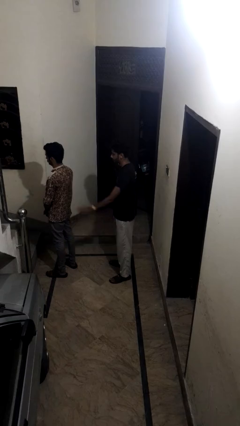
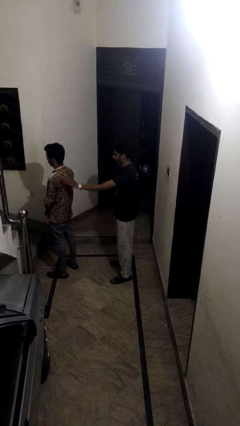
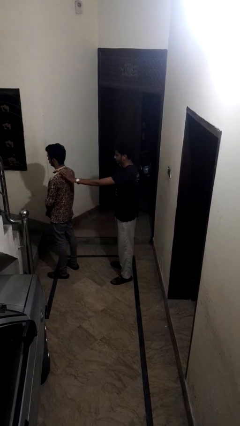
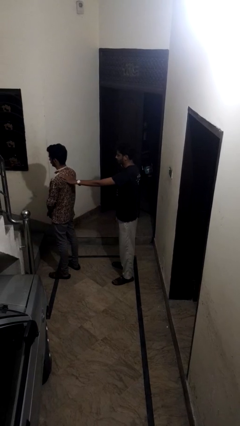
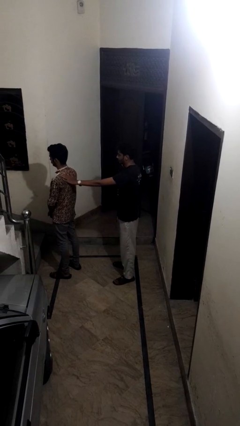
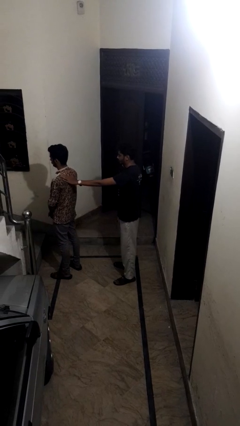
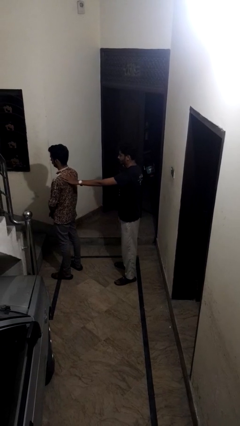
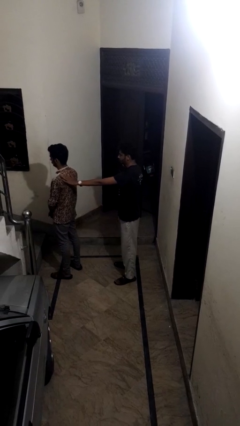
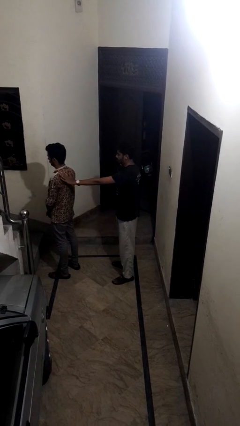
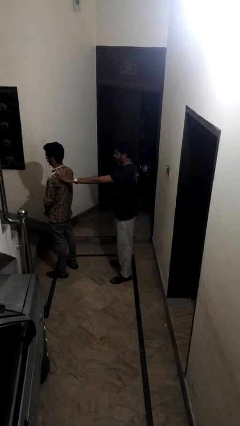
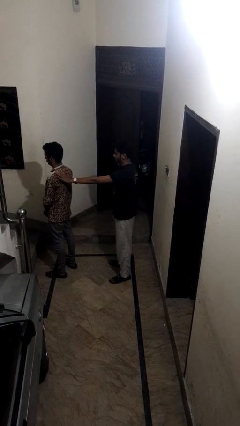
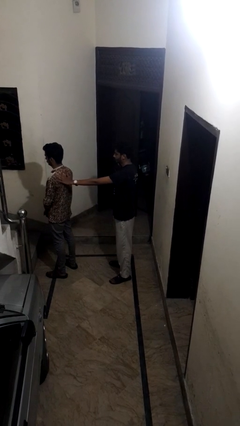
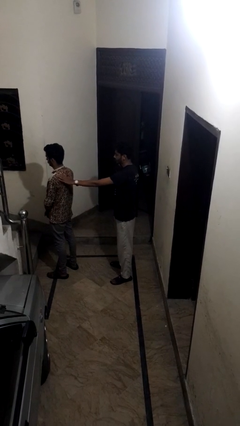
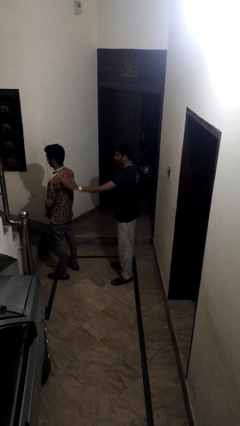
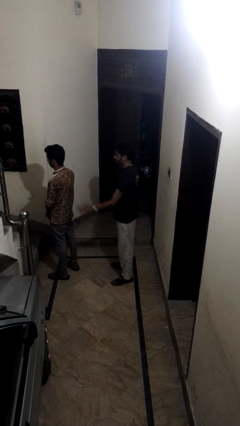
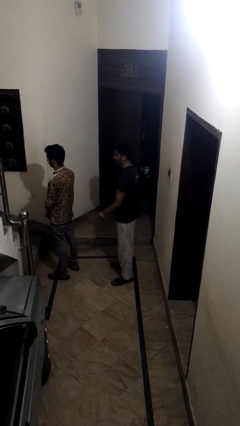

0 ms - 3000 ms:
person touches back of person

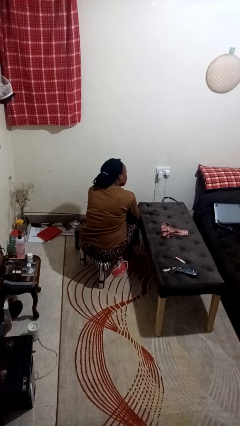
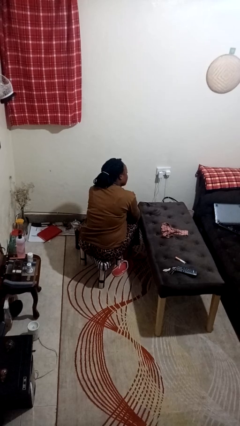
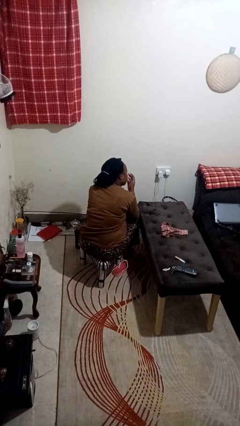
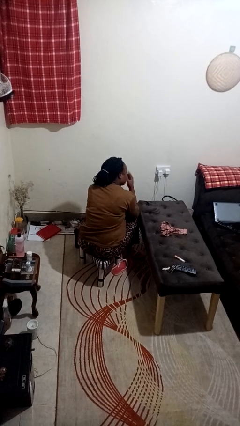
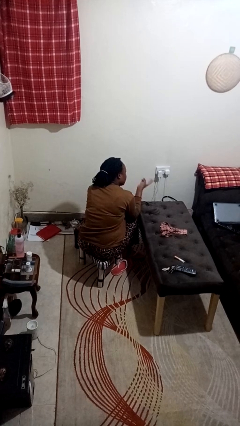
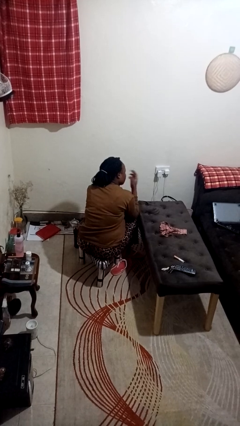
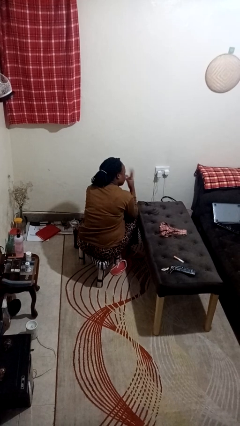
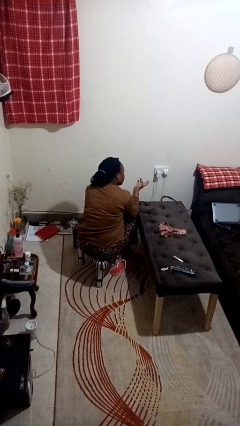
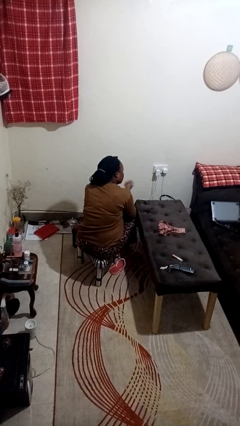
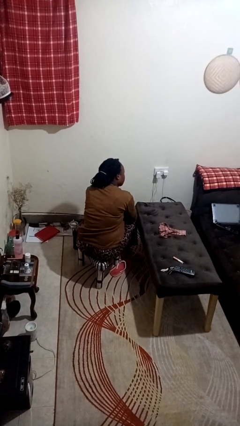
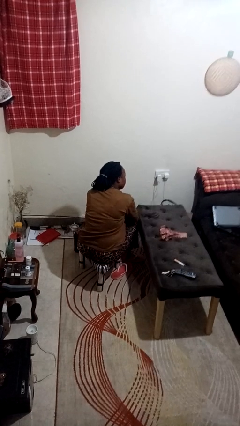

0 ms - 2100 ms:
person gestures watch closely

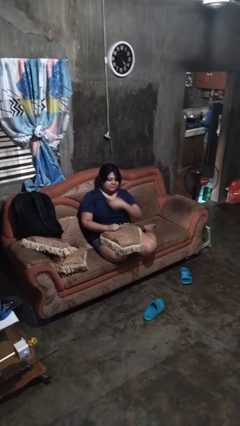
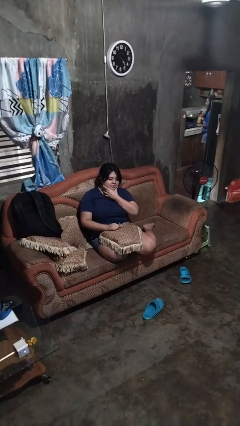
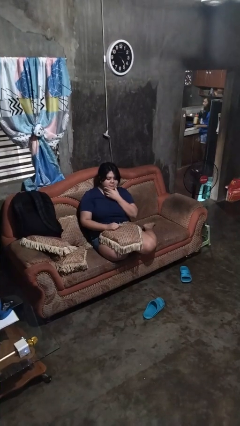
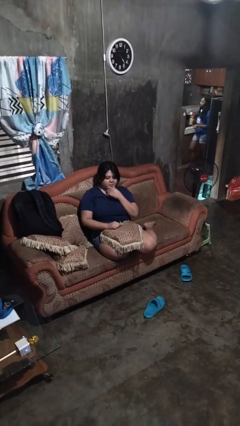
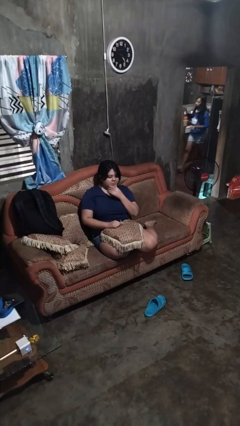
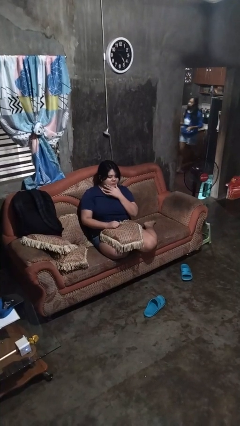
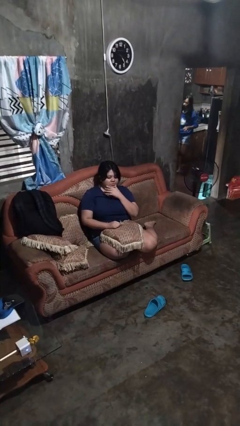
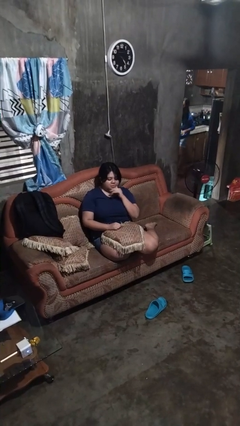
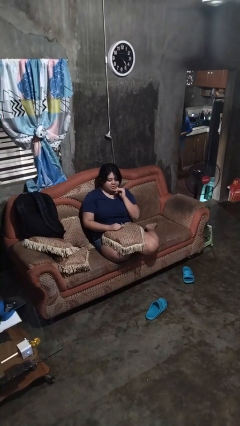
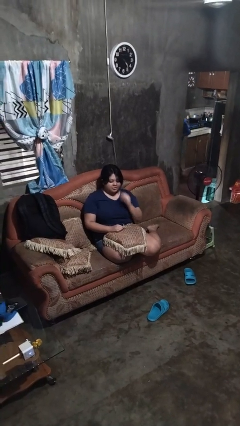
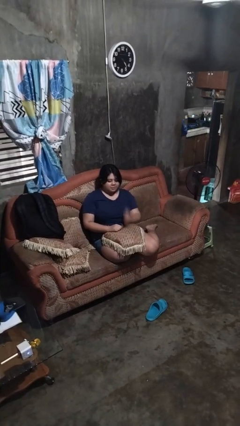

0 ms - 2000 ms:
person strokes chin

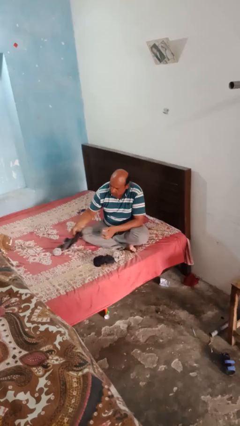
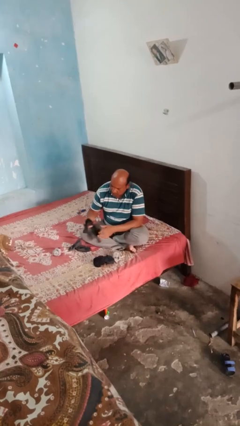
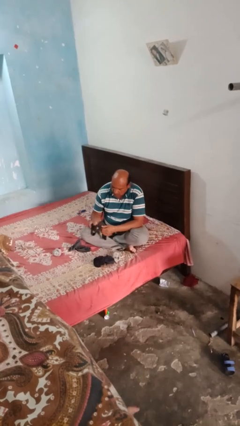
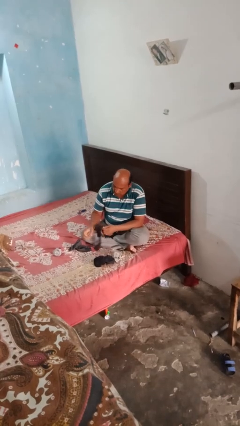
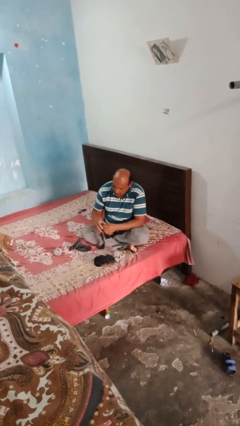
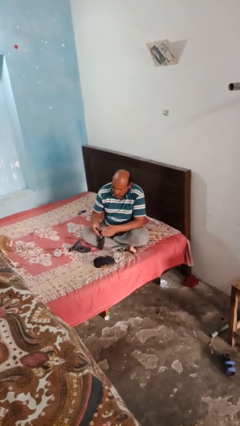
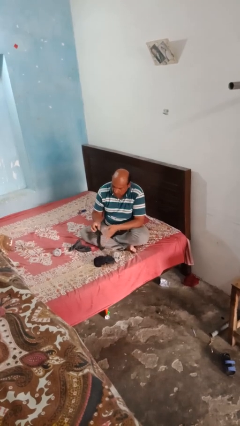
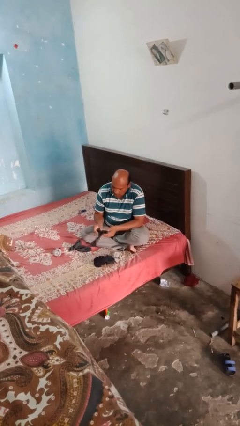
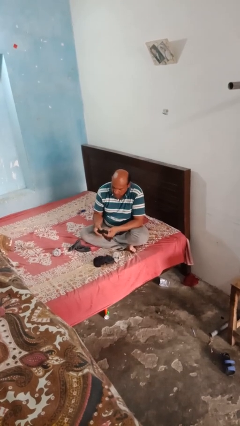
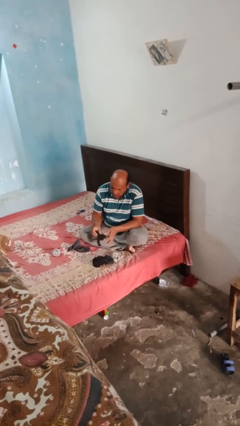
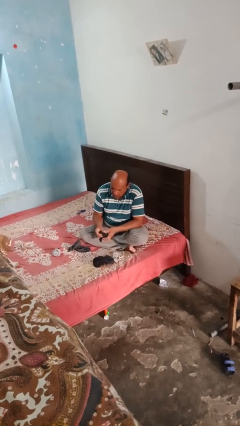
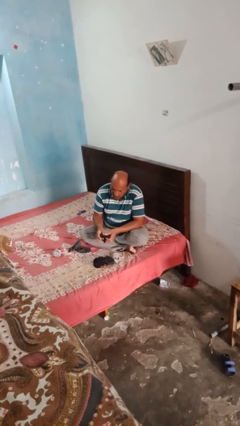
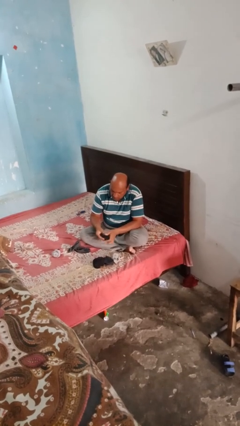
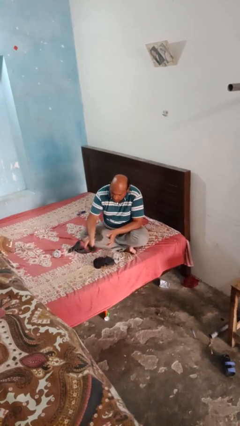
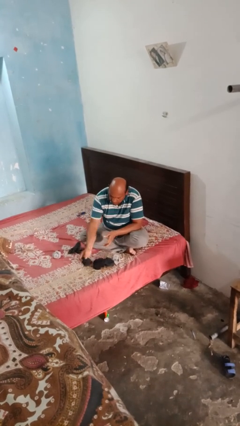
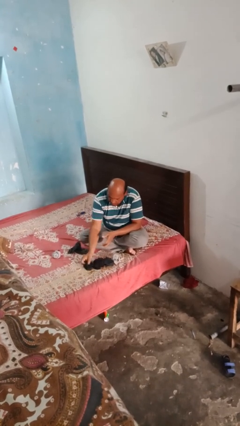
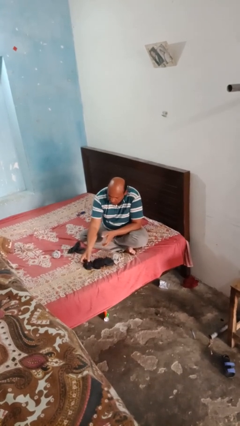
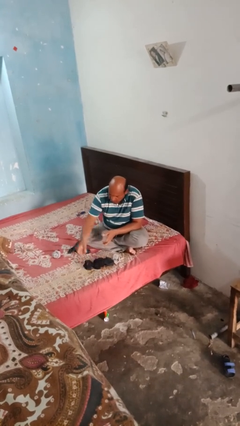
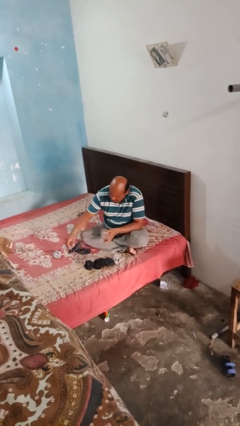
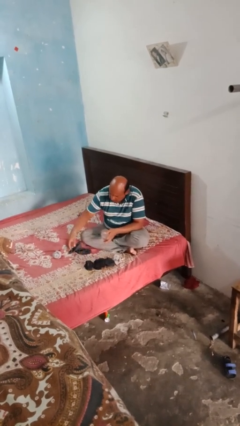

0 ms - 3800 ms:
person folds socks

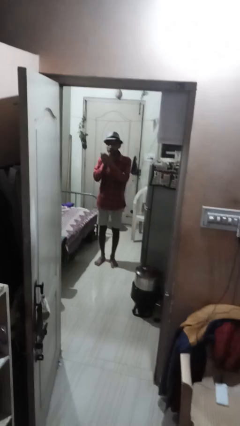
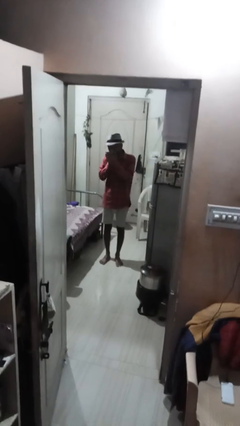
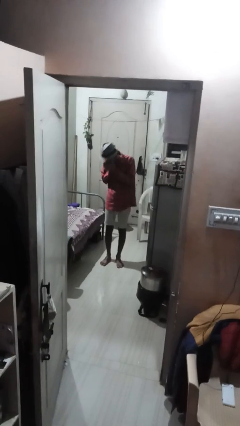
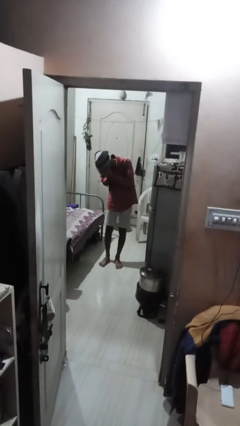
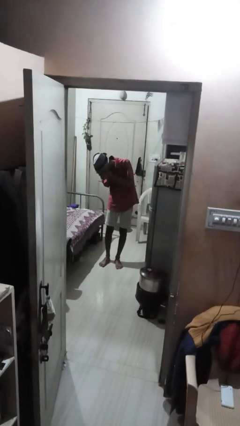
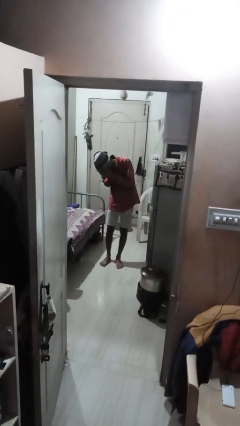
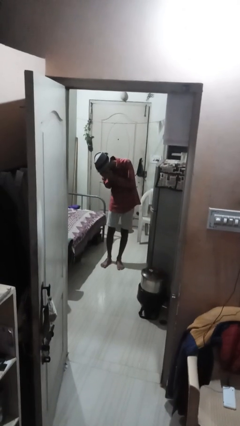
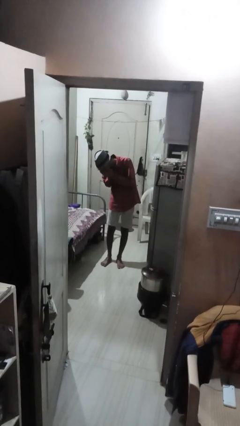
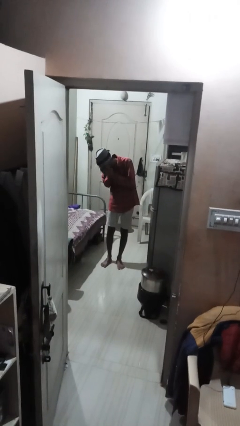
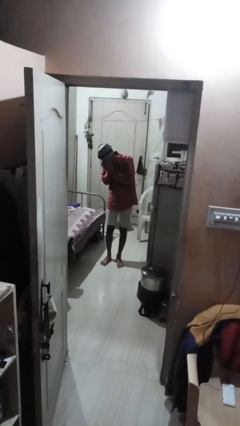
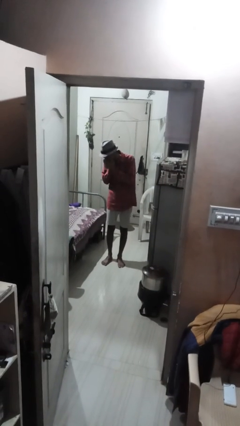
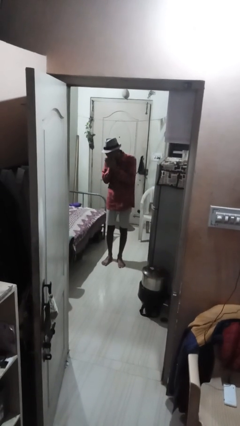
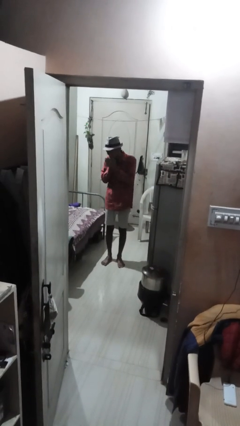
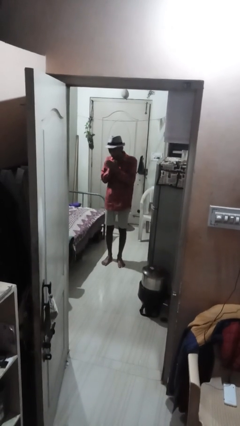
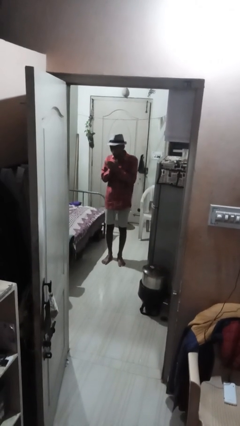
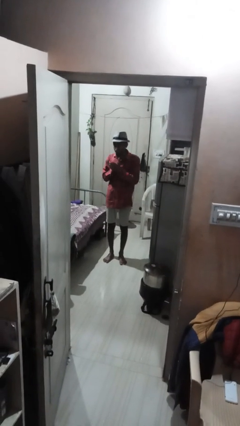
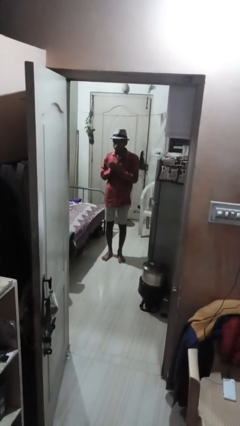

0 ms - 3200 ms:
person sneezes into hand

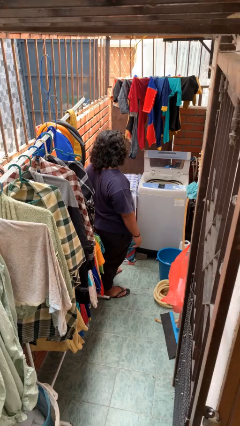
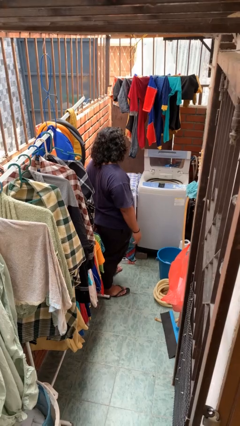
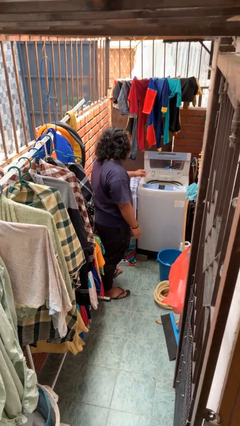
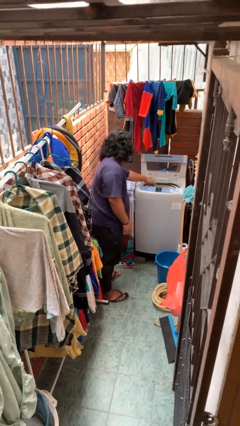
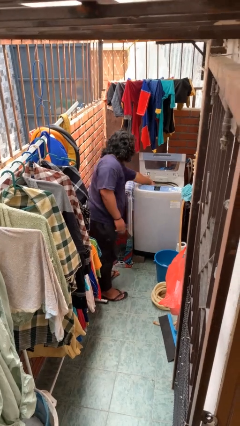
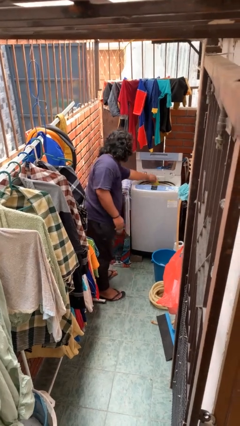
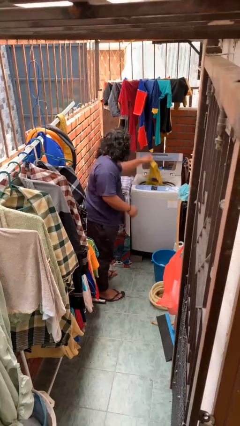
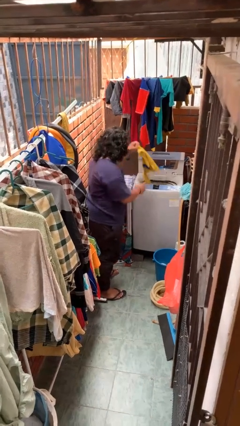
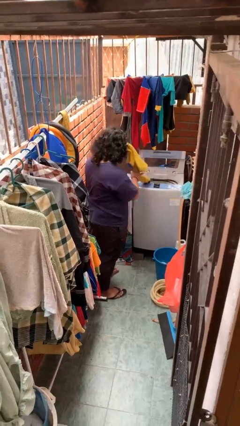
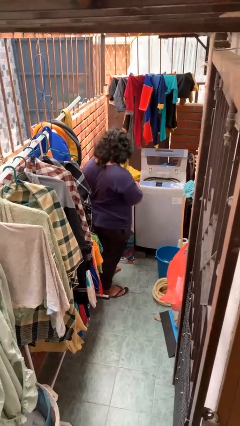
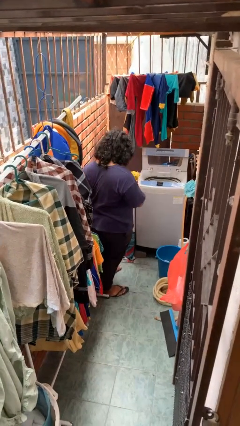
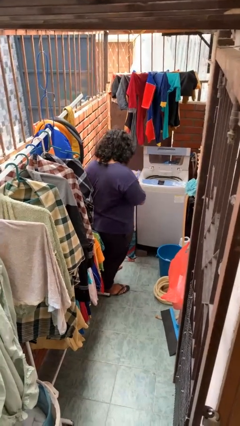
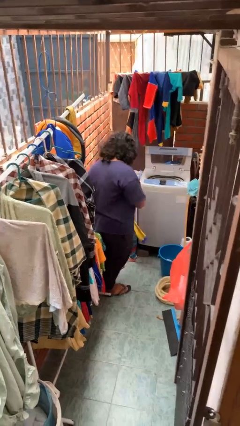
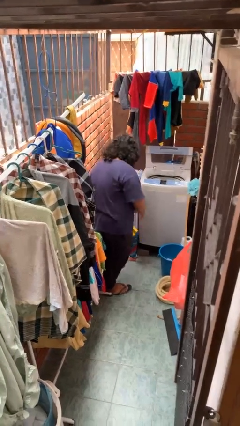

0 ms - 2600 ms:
person unloads clotheswasher

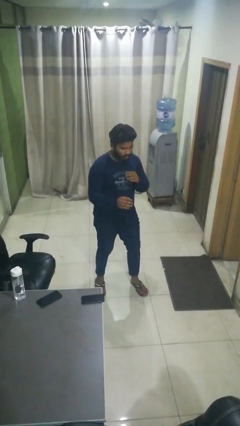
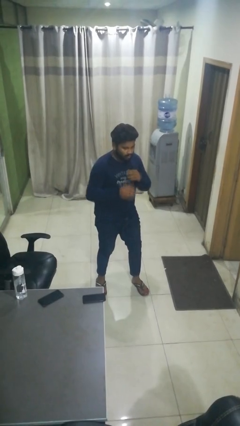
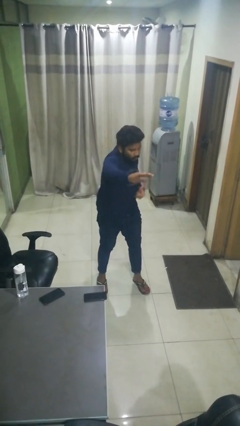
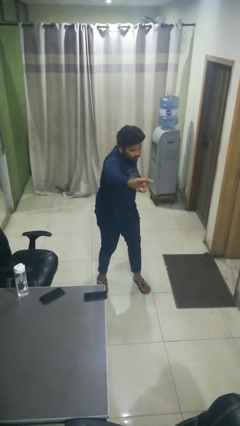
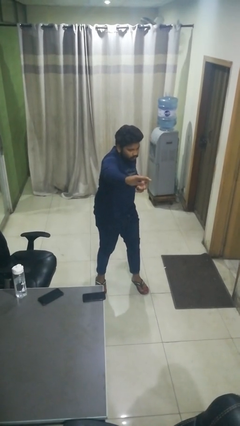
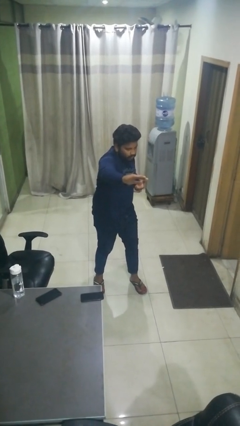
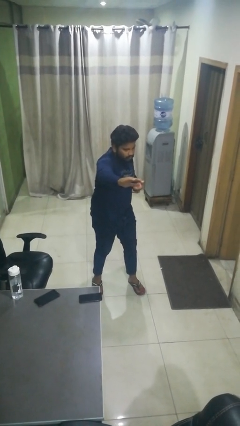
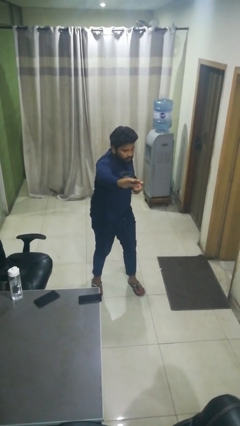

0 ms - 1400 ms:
person karate chop
